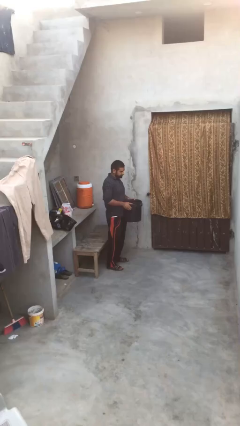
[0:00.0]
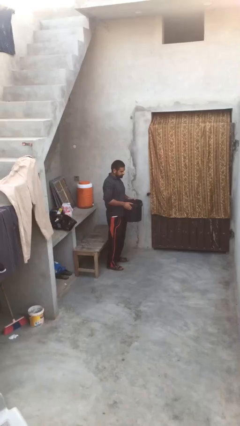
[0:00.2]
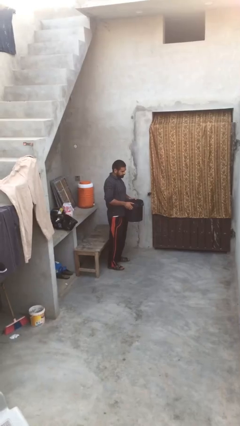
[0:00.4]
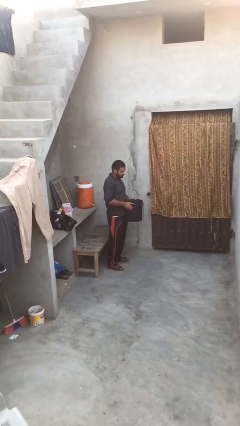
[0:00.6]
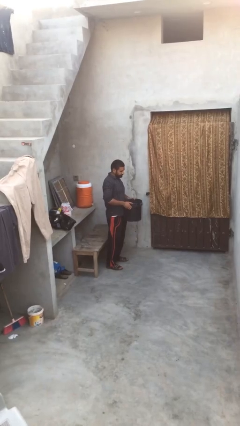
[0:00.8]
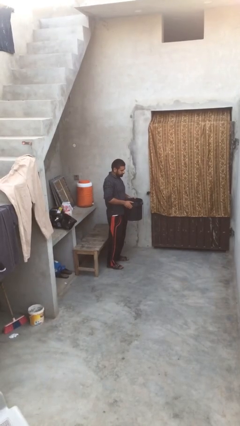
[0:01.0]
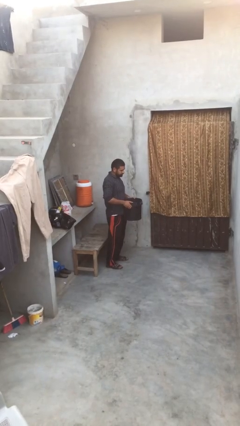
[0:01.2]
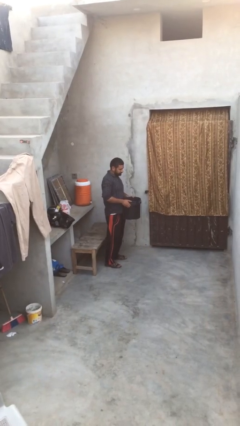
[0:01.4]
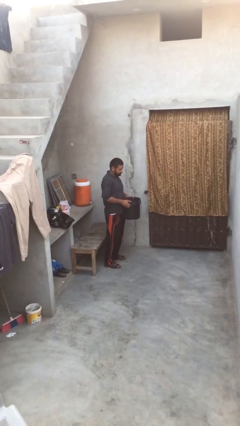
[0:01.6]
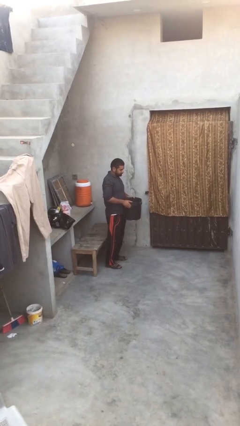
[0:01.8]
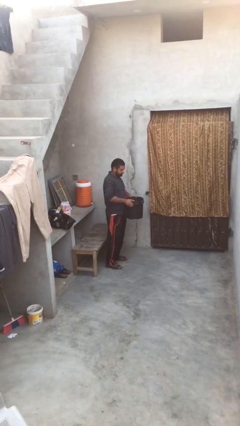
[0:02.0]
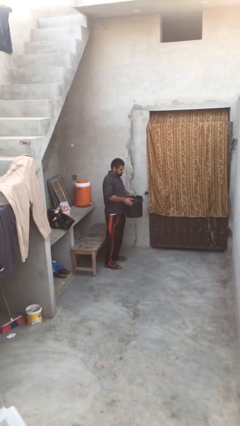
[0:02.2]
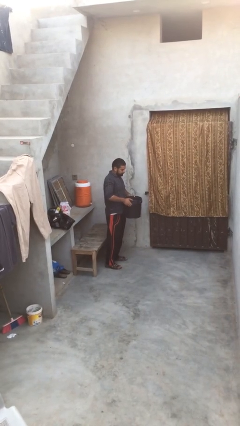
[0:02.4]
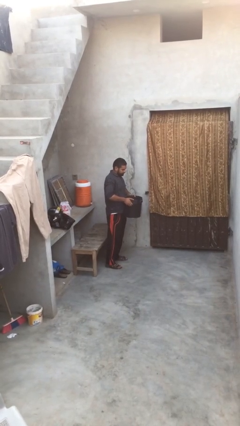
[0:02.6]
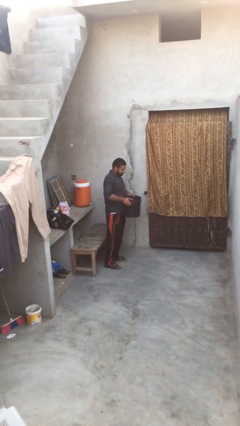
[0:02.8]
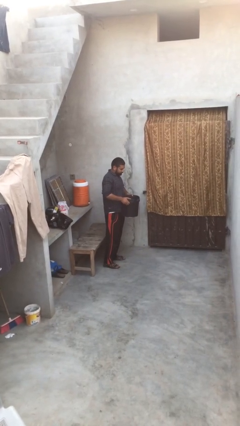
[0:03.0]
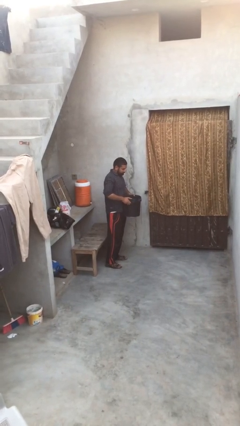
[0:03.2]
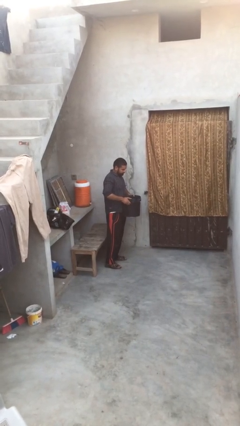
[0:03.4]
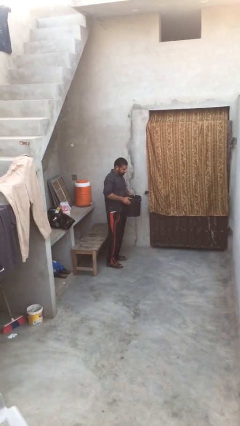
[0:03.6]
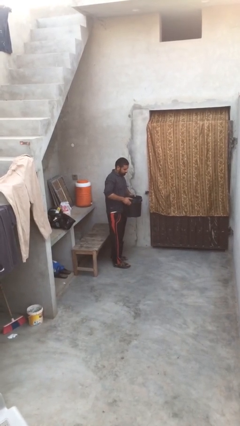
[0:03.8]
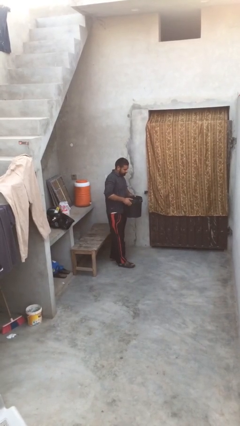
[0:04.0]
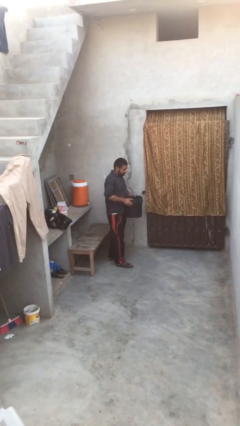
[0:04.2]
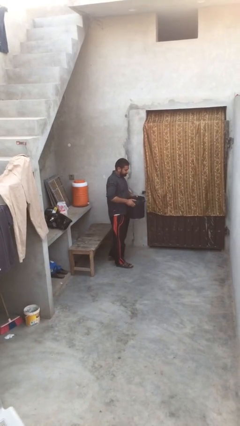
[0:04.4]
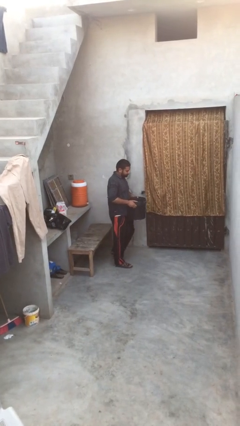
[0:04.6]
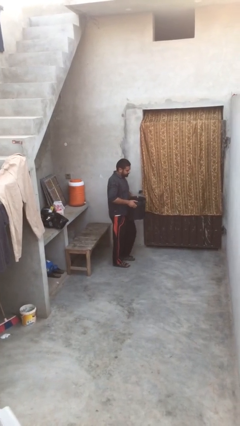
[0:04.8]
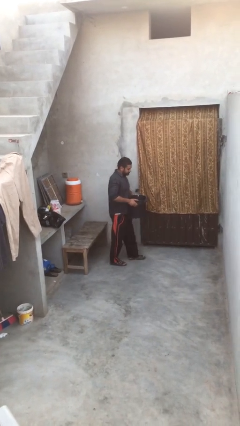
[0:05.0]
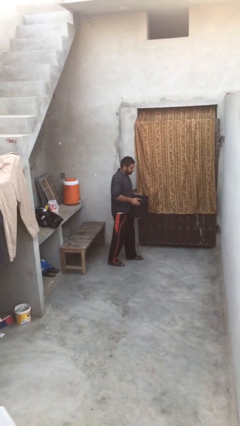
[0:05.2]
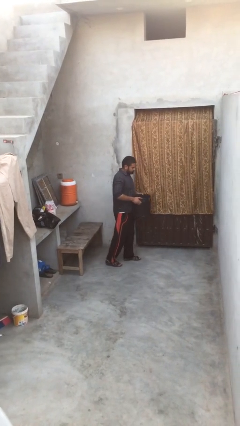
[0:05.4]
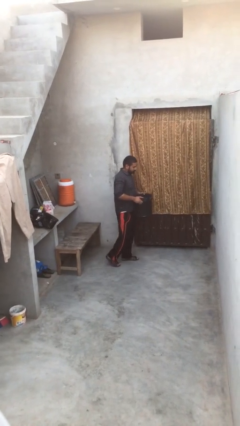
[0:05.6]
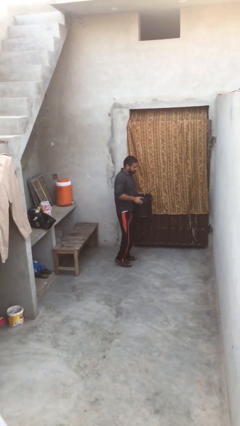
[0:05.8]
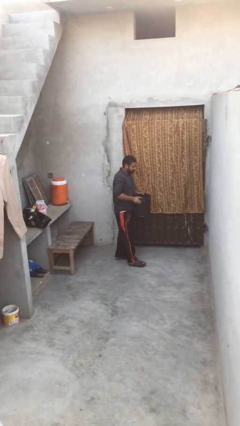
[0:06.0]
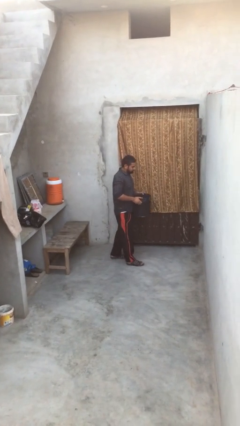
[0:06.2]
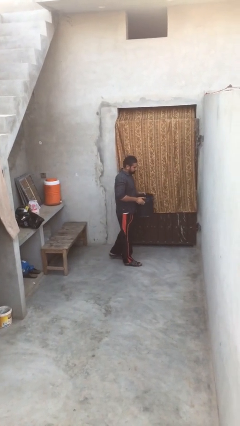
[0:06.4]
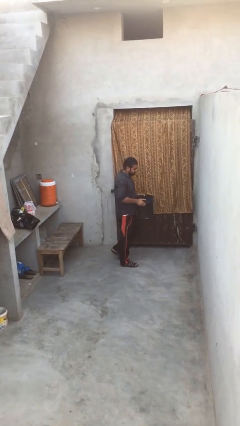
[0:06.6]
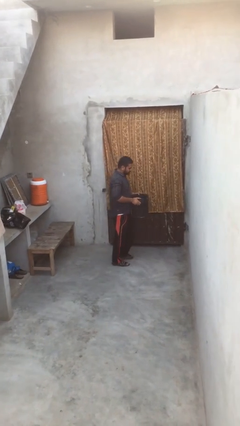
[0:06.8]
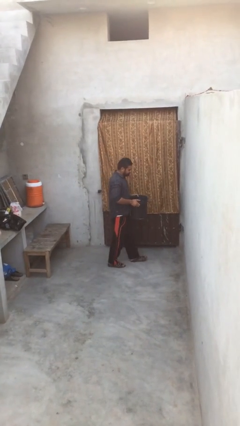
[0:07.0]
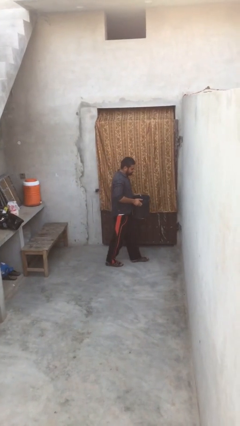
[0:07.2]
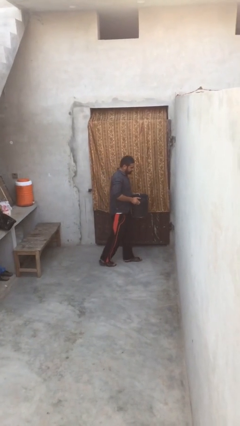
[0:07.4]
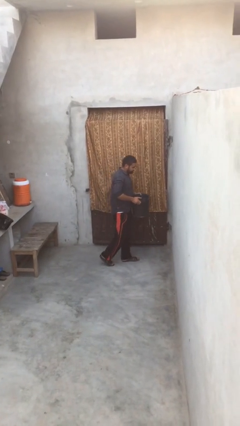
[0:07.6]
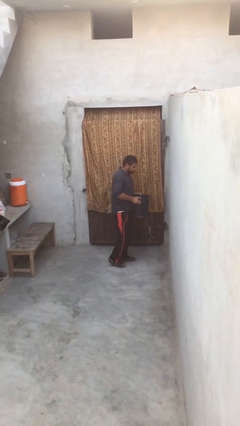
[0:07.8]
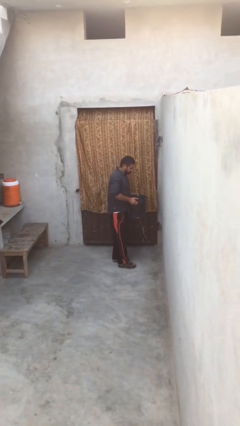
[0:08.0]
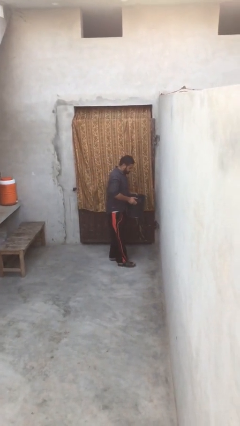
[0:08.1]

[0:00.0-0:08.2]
person carries heavy object

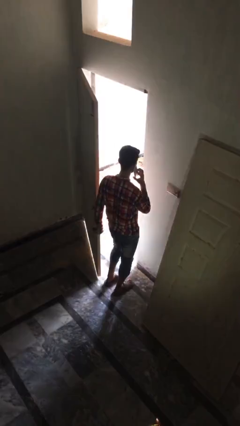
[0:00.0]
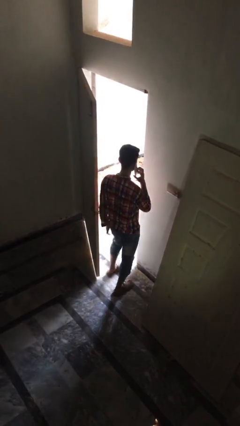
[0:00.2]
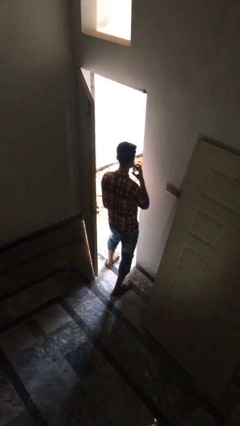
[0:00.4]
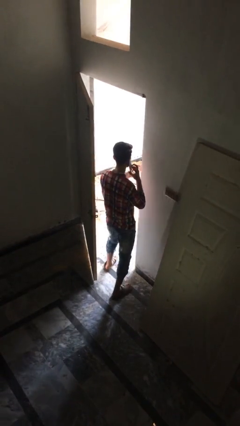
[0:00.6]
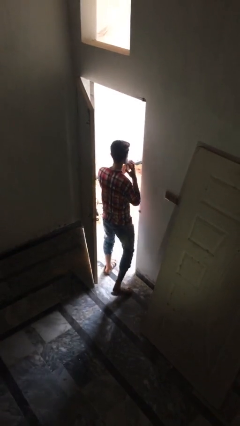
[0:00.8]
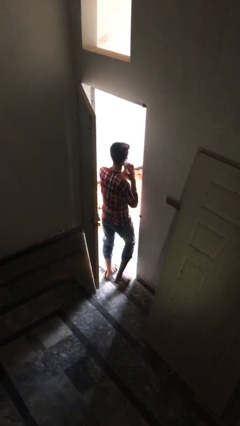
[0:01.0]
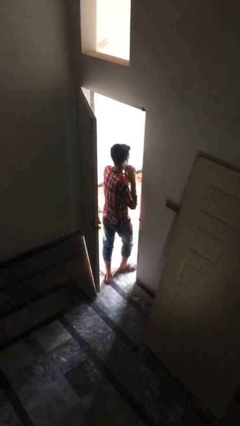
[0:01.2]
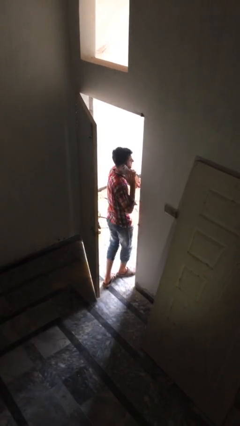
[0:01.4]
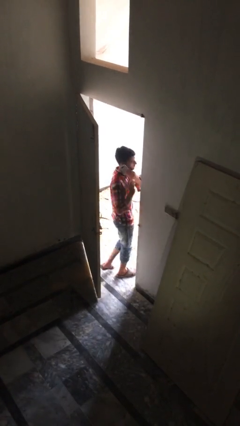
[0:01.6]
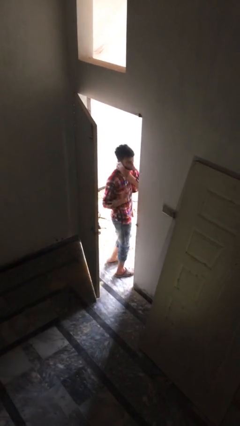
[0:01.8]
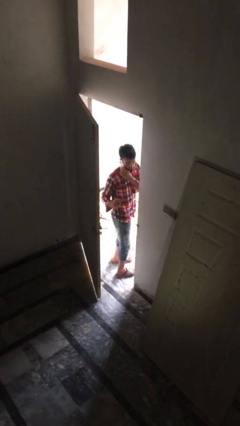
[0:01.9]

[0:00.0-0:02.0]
person exits scene through structure

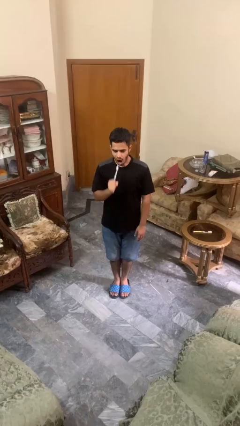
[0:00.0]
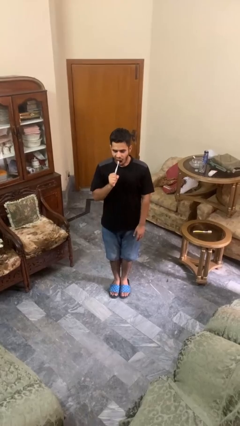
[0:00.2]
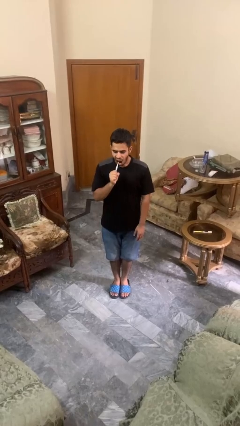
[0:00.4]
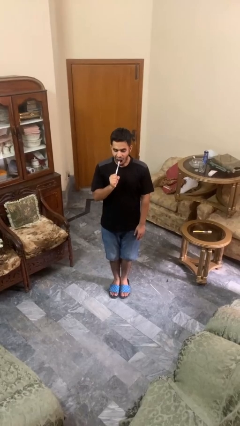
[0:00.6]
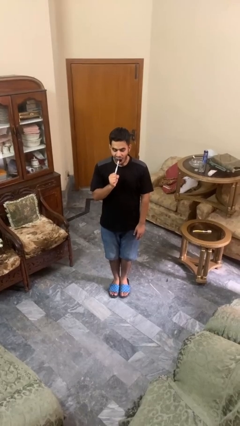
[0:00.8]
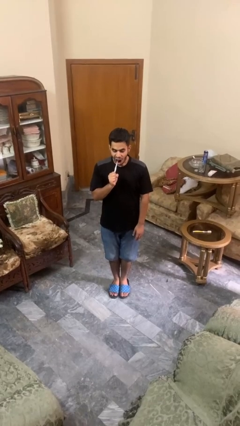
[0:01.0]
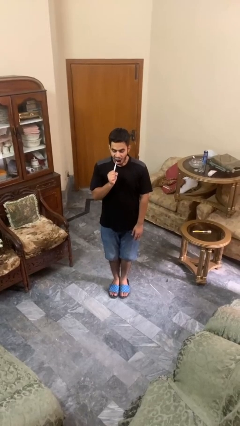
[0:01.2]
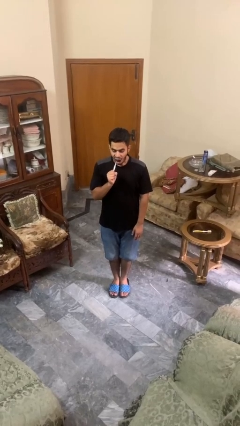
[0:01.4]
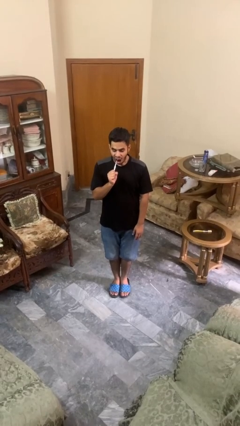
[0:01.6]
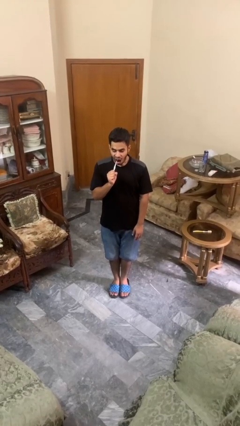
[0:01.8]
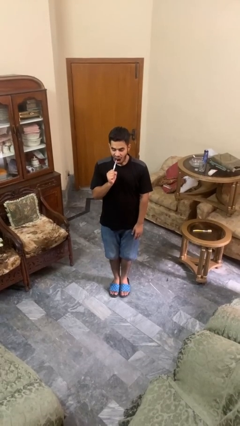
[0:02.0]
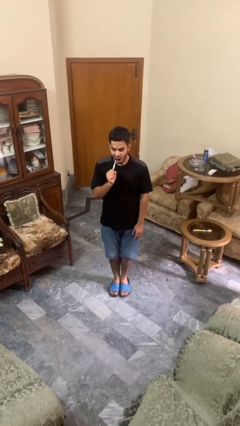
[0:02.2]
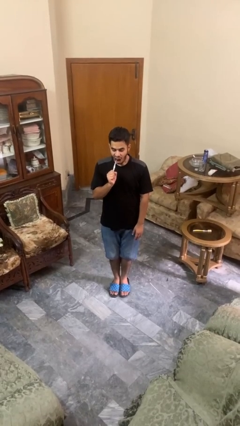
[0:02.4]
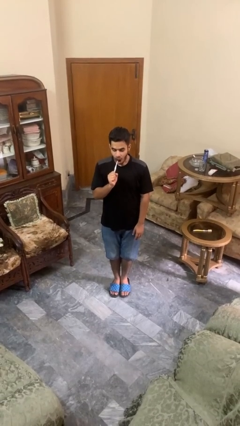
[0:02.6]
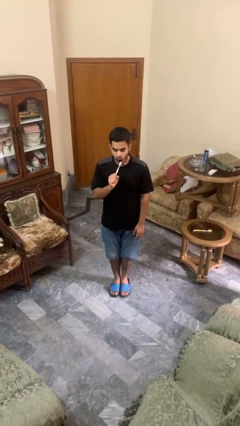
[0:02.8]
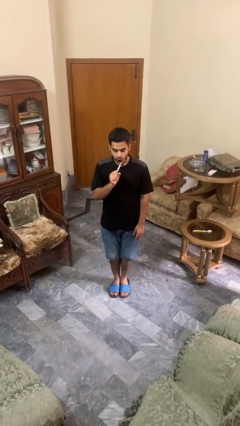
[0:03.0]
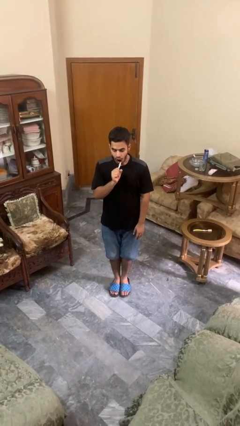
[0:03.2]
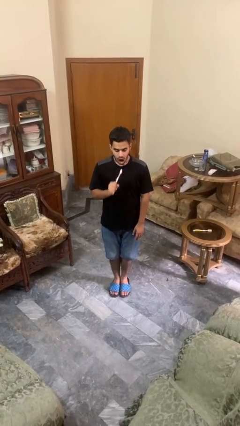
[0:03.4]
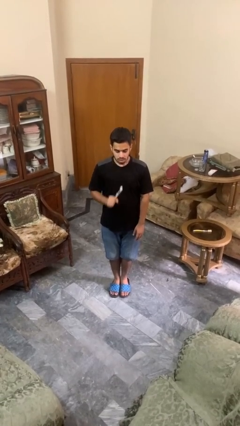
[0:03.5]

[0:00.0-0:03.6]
person brushes teeth

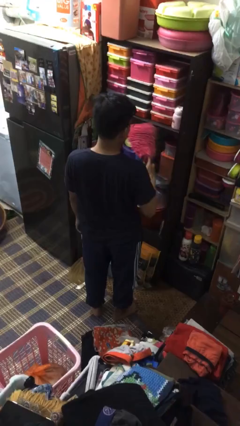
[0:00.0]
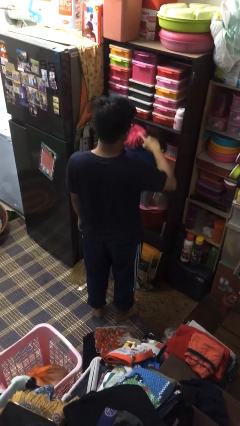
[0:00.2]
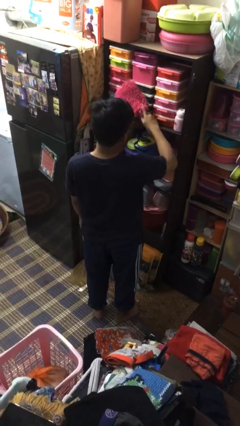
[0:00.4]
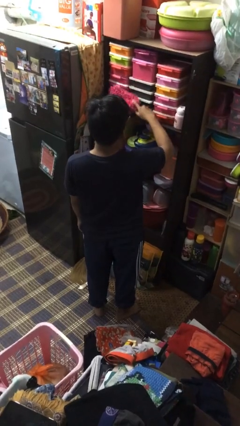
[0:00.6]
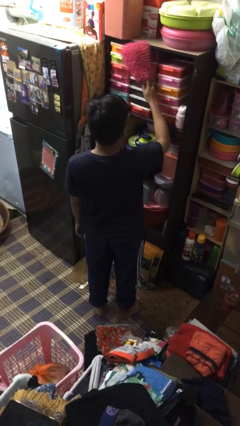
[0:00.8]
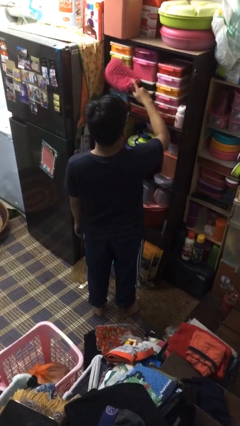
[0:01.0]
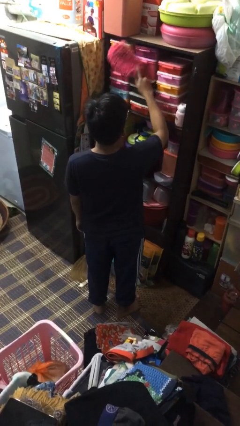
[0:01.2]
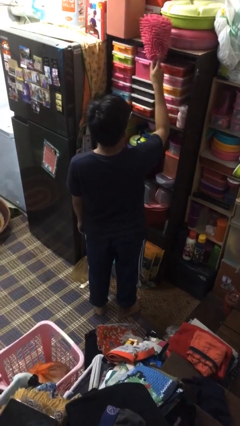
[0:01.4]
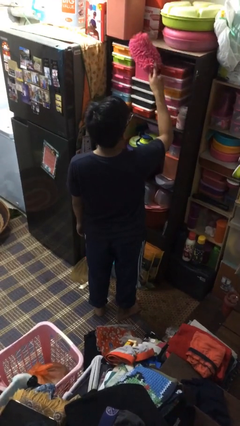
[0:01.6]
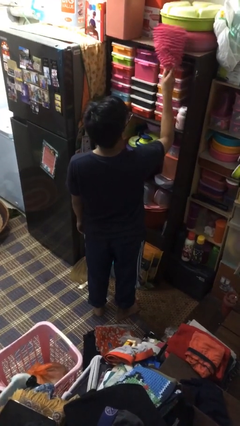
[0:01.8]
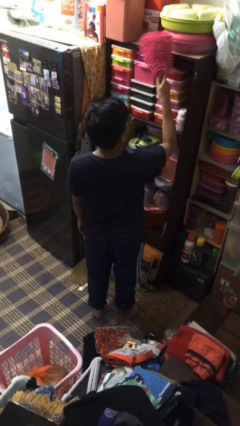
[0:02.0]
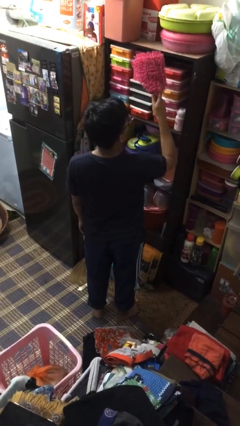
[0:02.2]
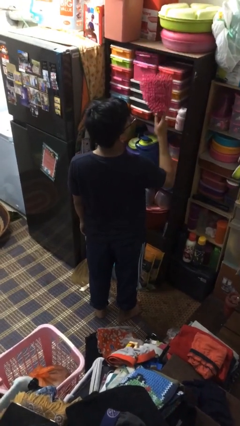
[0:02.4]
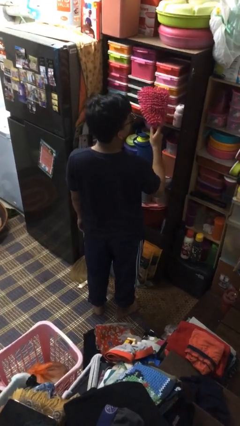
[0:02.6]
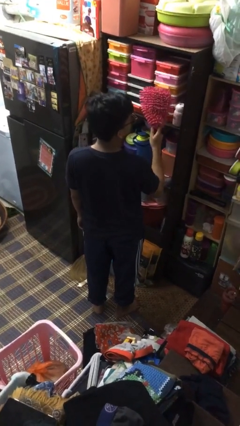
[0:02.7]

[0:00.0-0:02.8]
person dusts furniture

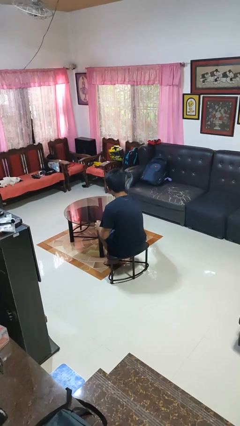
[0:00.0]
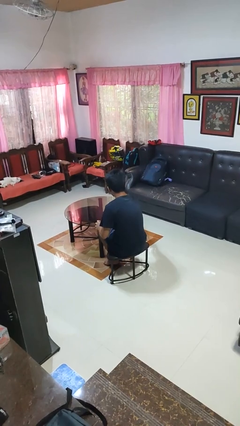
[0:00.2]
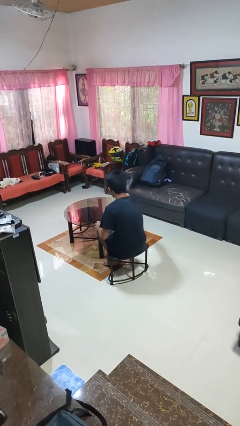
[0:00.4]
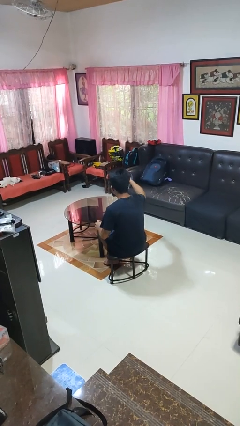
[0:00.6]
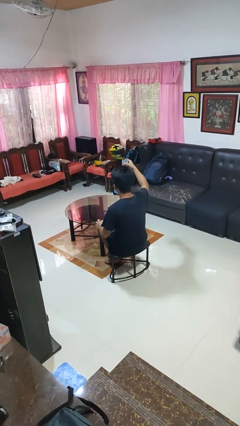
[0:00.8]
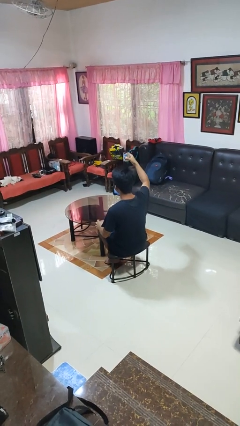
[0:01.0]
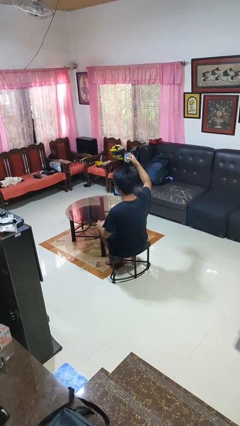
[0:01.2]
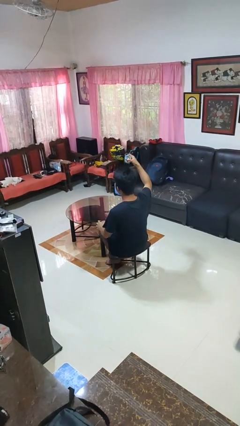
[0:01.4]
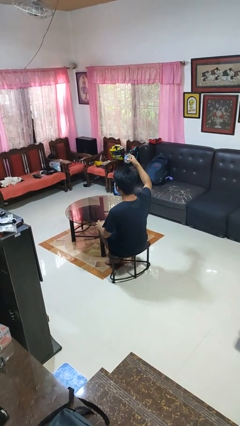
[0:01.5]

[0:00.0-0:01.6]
person picks up object from table
